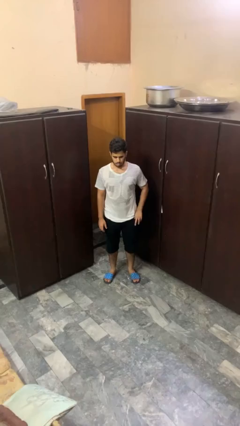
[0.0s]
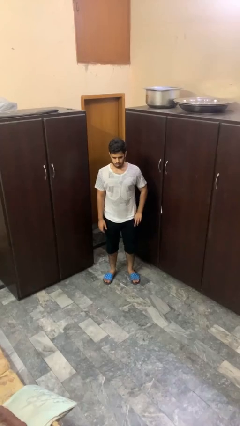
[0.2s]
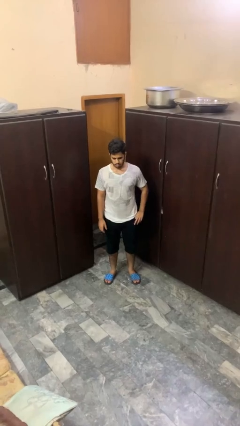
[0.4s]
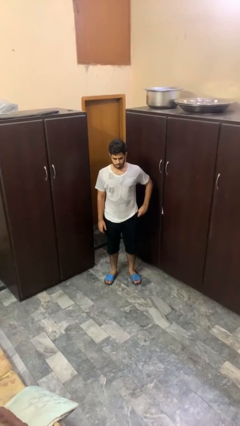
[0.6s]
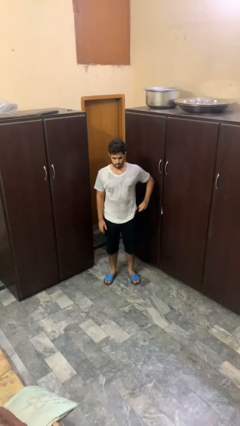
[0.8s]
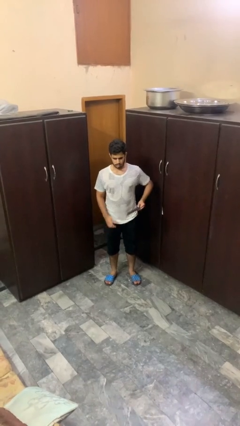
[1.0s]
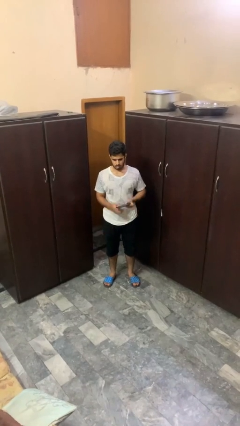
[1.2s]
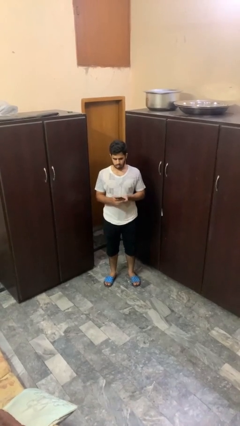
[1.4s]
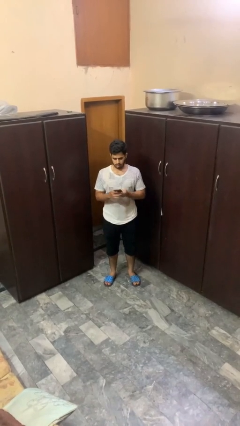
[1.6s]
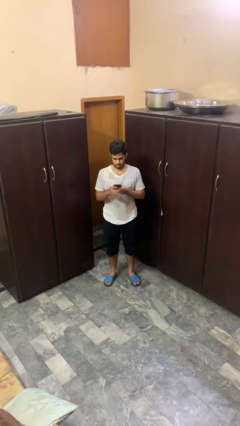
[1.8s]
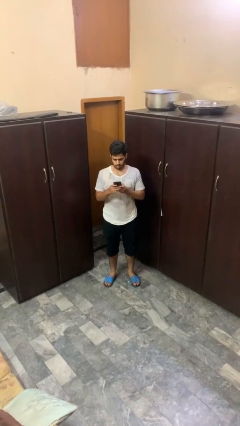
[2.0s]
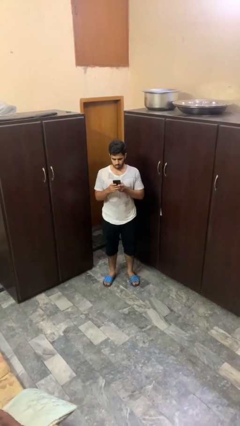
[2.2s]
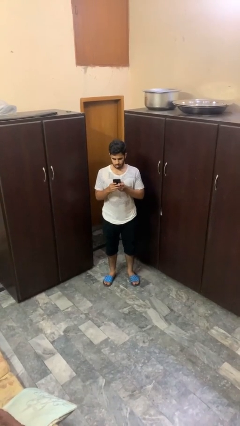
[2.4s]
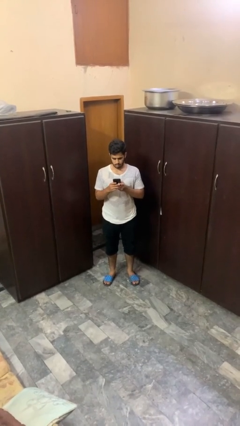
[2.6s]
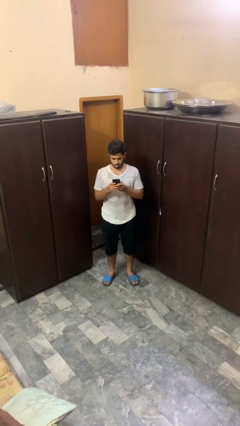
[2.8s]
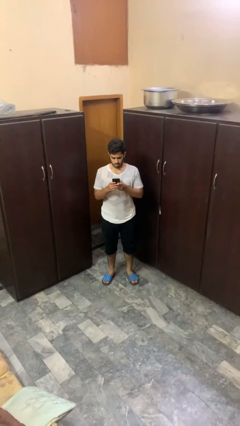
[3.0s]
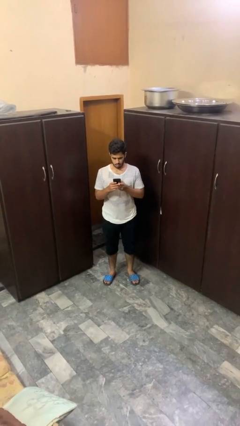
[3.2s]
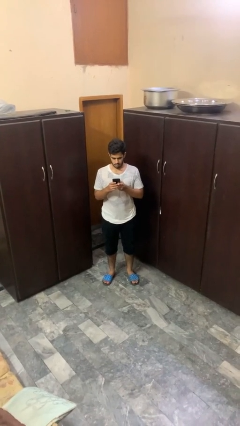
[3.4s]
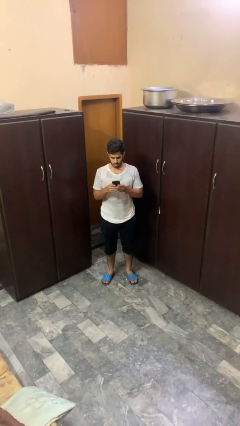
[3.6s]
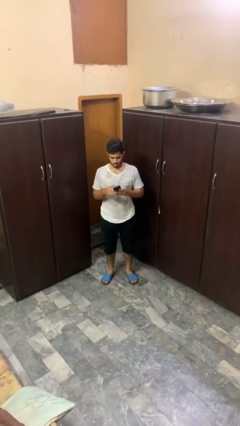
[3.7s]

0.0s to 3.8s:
person takes phone from pocket

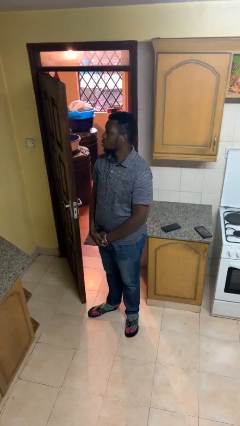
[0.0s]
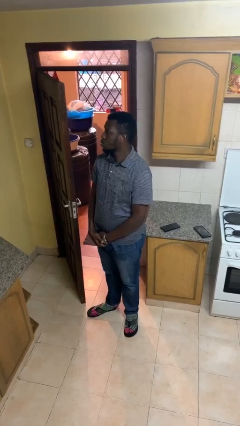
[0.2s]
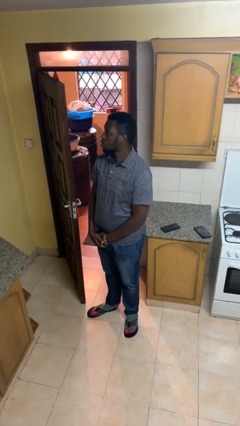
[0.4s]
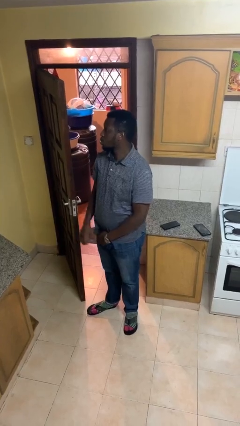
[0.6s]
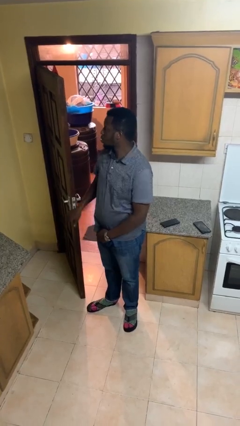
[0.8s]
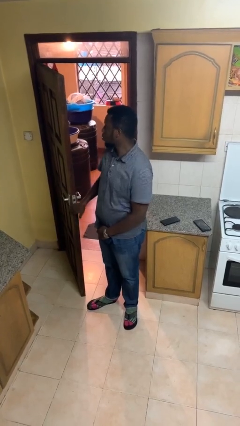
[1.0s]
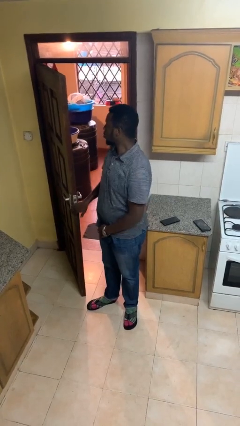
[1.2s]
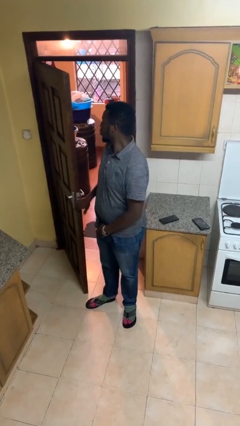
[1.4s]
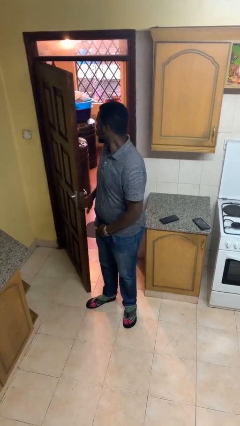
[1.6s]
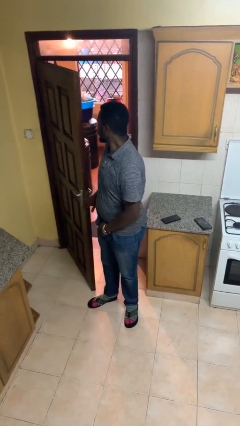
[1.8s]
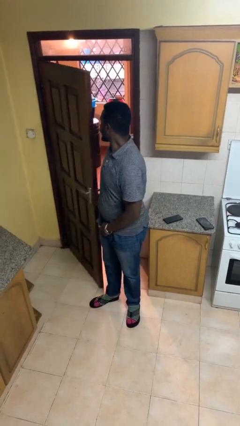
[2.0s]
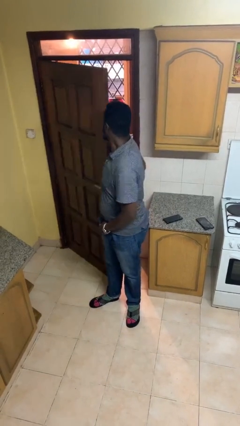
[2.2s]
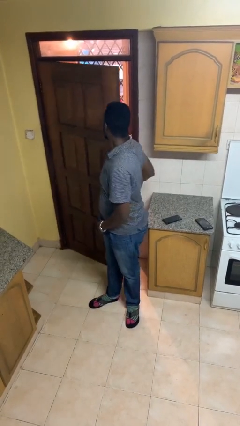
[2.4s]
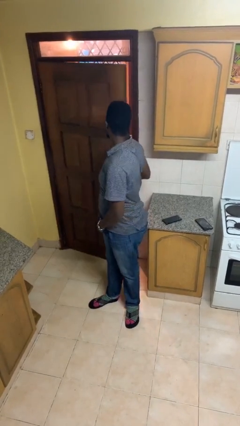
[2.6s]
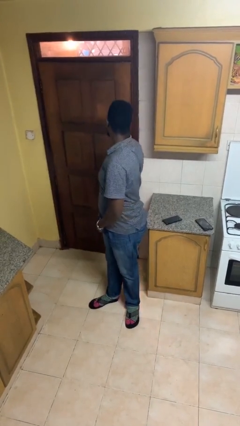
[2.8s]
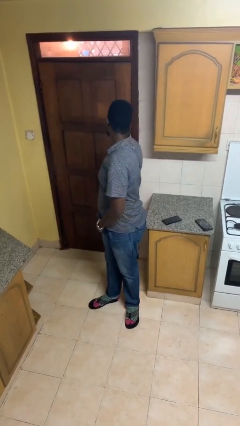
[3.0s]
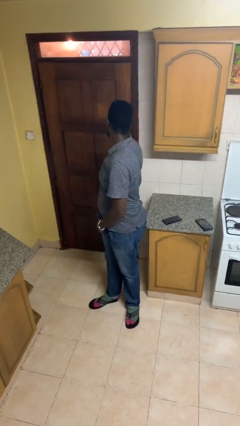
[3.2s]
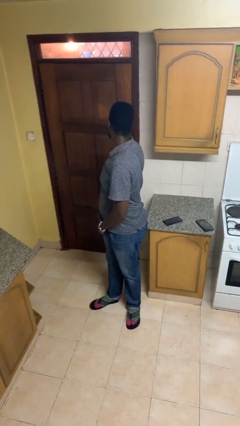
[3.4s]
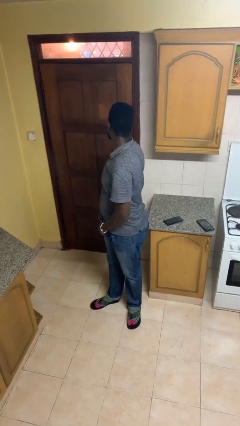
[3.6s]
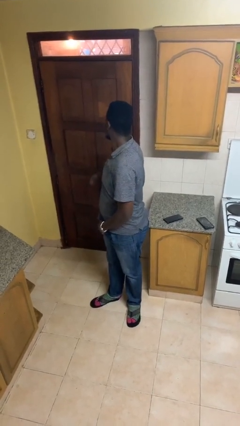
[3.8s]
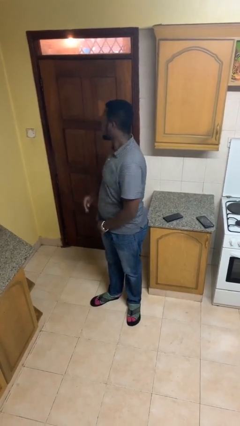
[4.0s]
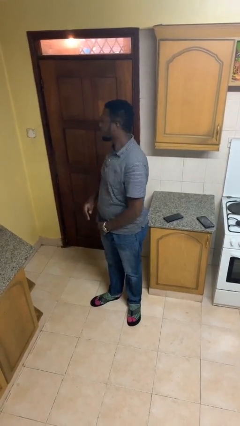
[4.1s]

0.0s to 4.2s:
person closes facility door

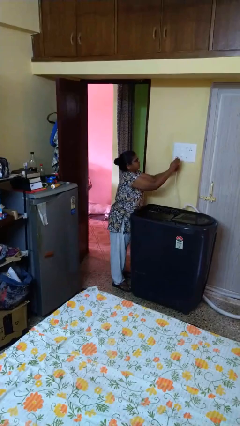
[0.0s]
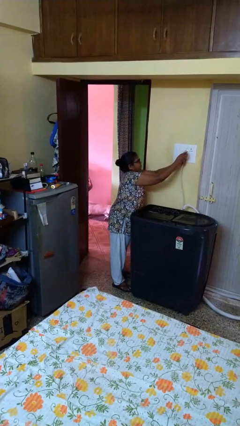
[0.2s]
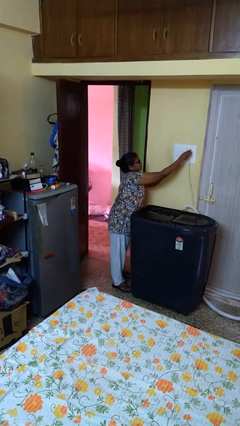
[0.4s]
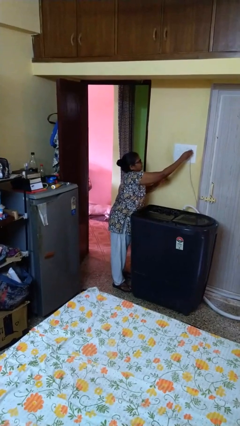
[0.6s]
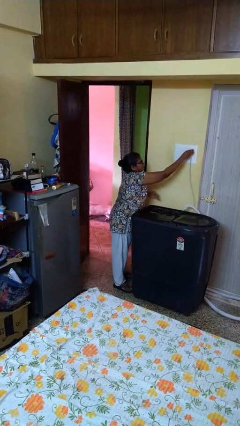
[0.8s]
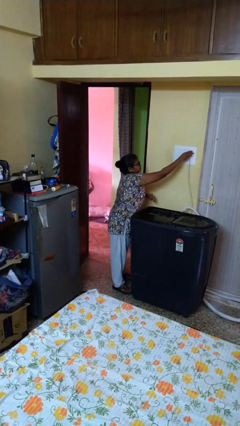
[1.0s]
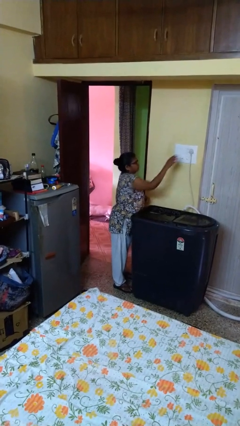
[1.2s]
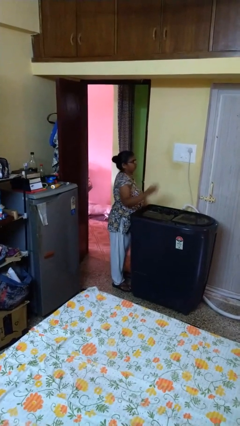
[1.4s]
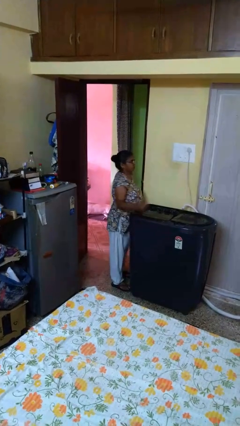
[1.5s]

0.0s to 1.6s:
person plugs into electrical socket

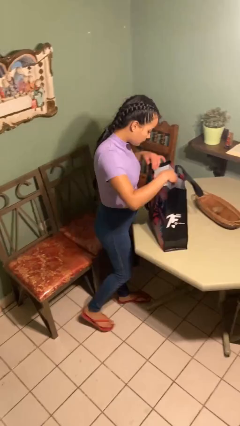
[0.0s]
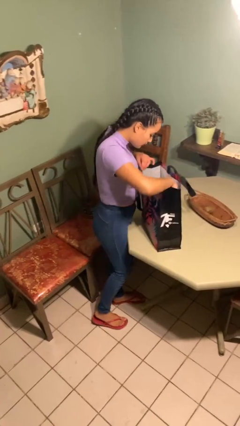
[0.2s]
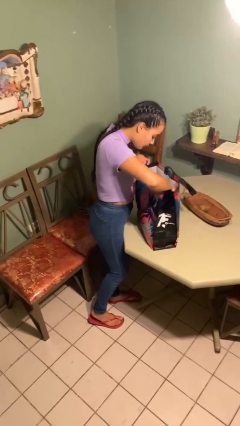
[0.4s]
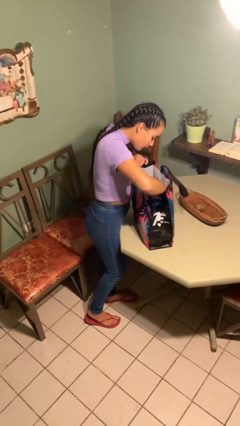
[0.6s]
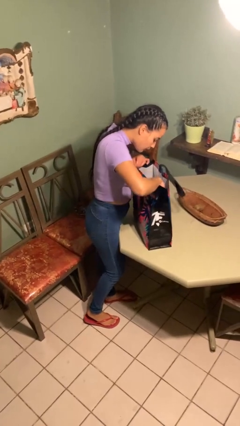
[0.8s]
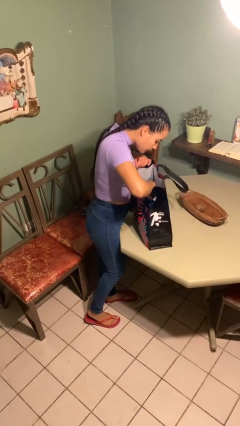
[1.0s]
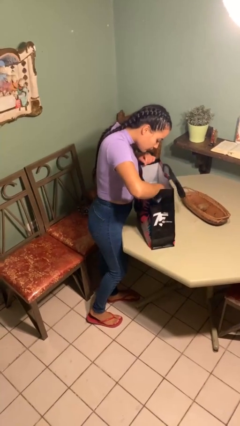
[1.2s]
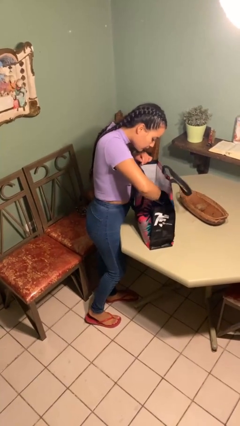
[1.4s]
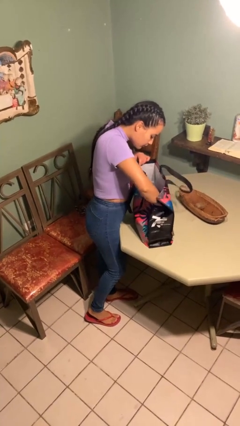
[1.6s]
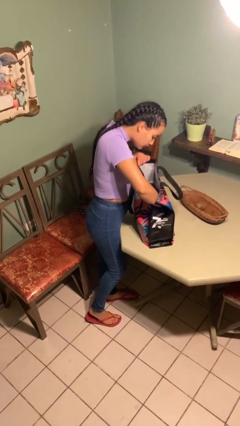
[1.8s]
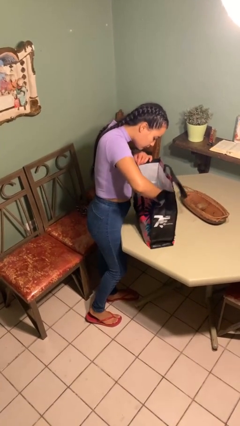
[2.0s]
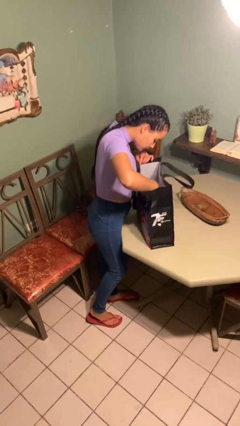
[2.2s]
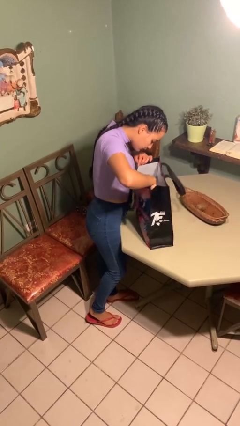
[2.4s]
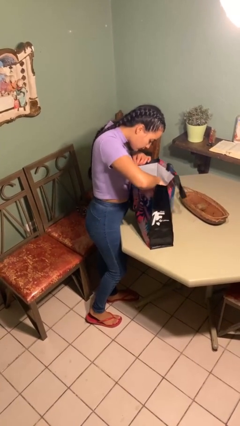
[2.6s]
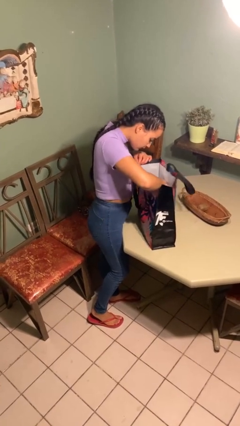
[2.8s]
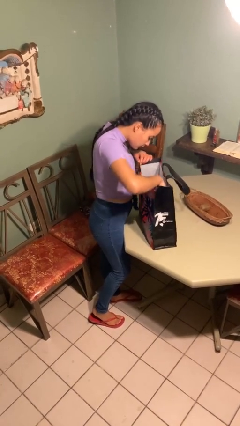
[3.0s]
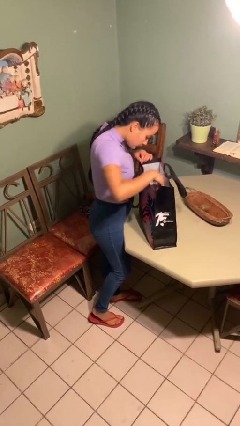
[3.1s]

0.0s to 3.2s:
person searches in bag

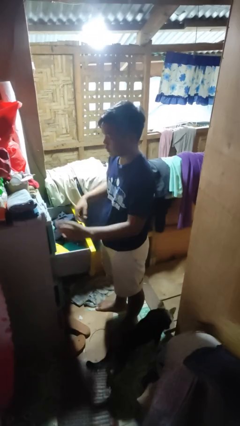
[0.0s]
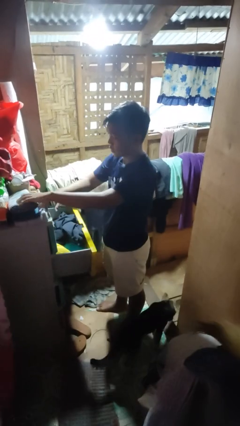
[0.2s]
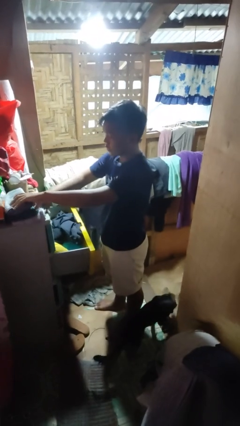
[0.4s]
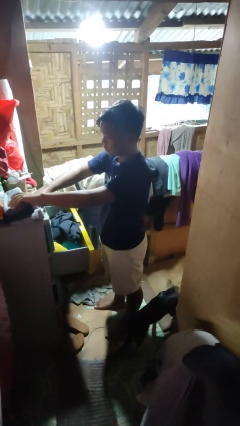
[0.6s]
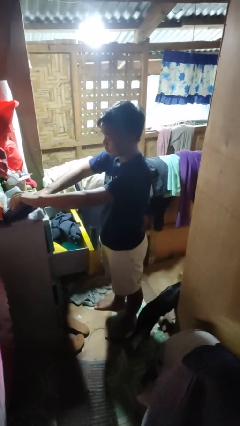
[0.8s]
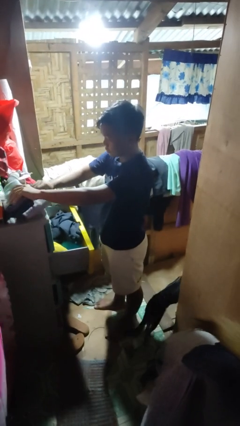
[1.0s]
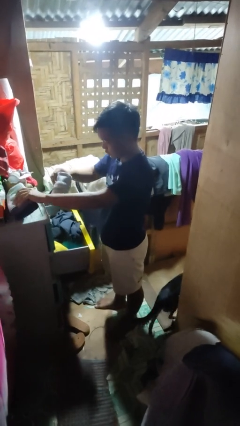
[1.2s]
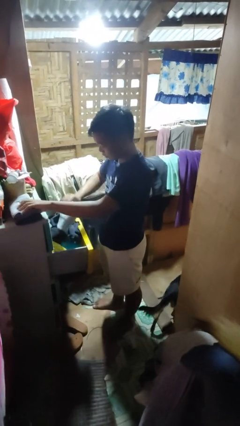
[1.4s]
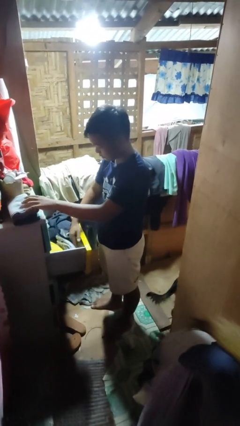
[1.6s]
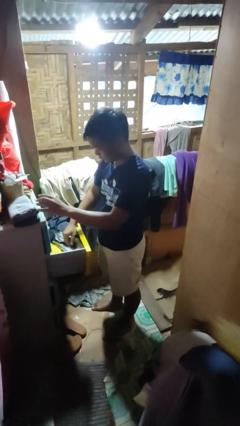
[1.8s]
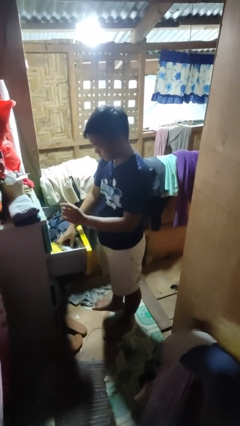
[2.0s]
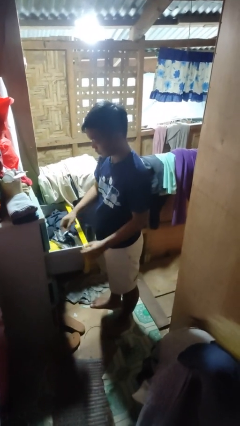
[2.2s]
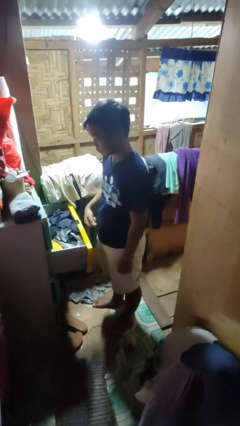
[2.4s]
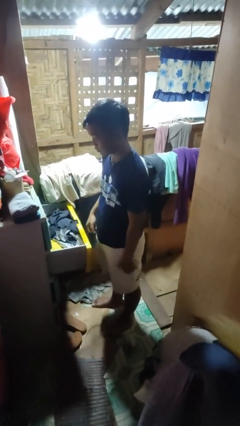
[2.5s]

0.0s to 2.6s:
person puts clothes into dresser

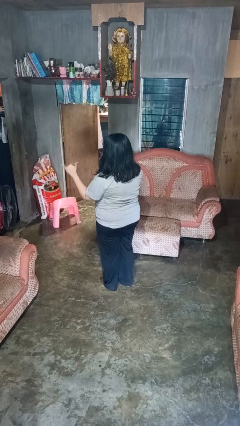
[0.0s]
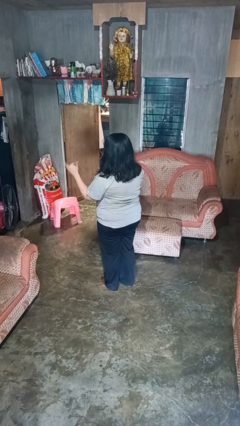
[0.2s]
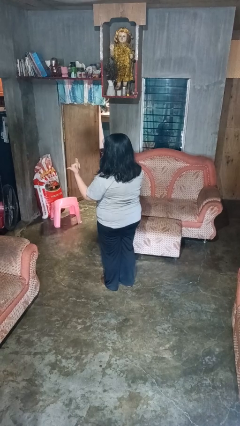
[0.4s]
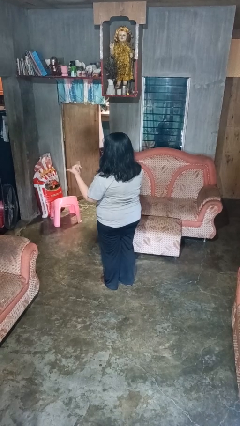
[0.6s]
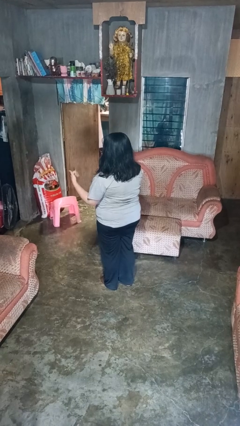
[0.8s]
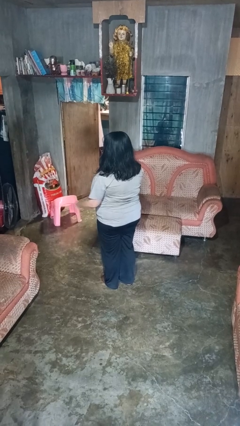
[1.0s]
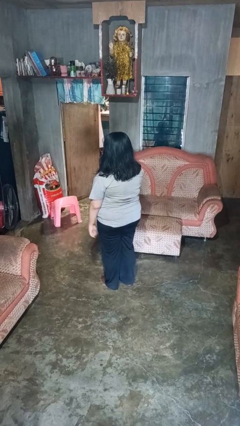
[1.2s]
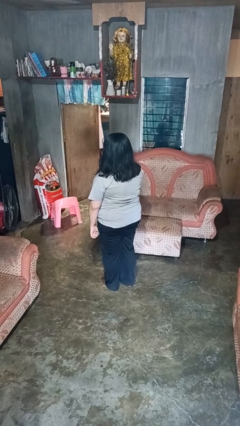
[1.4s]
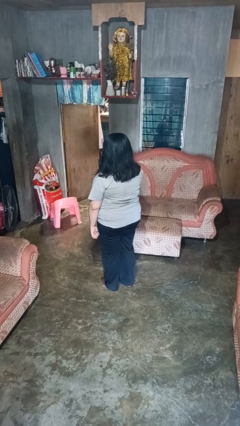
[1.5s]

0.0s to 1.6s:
person gestures hang loose

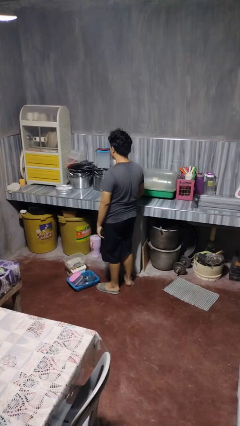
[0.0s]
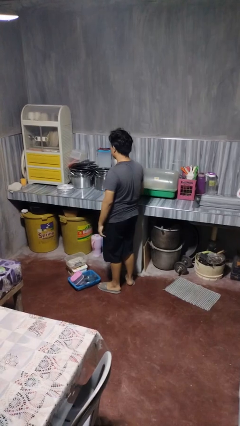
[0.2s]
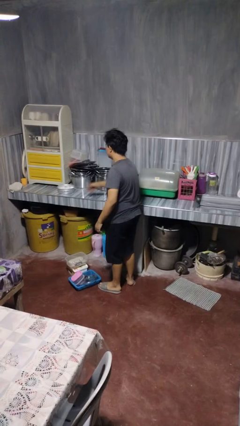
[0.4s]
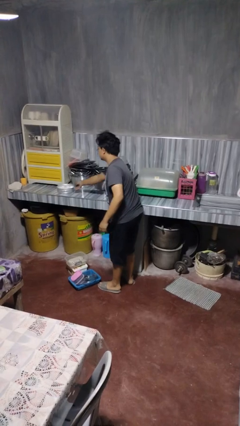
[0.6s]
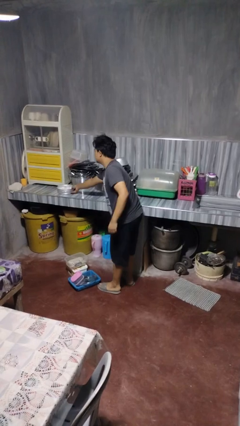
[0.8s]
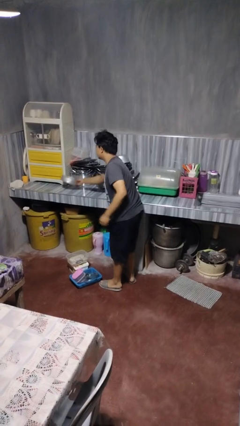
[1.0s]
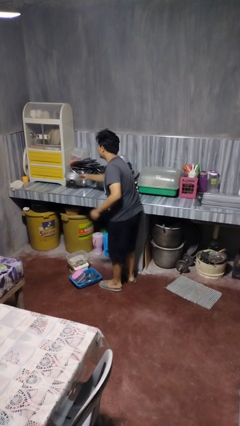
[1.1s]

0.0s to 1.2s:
person picks up object from countertop
